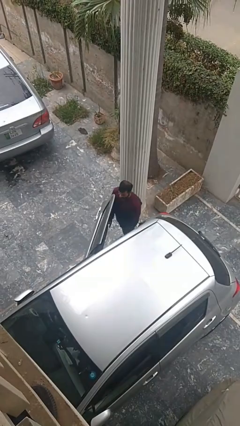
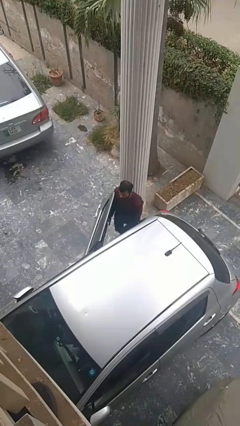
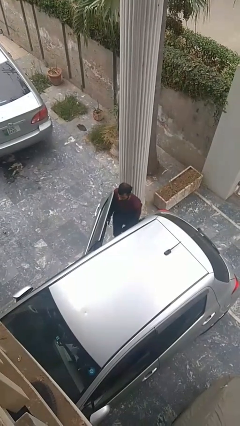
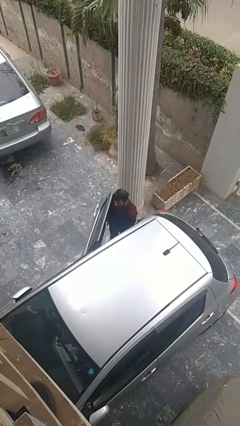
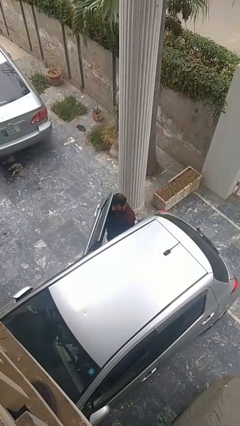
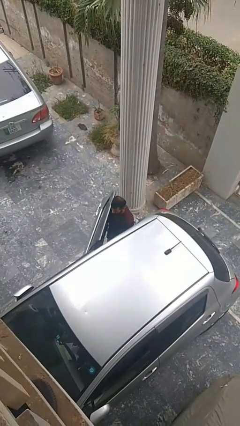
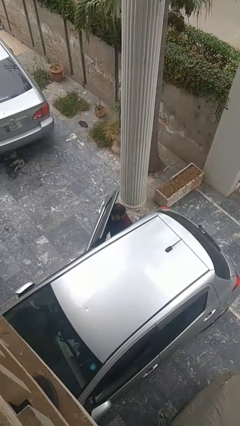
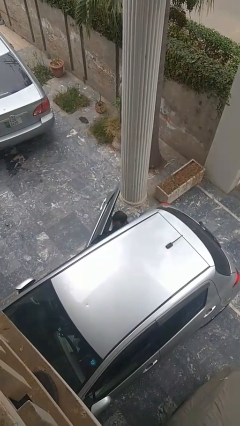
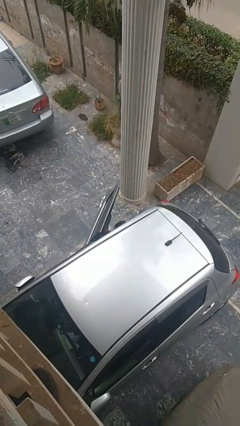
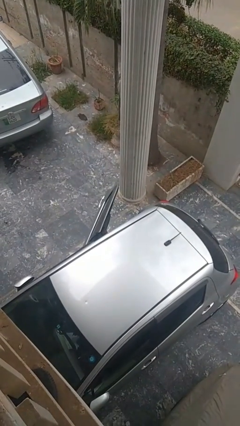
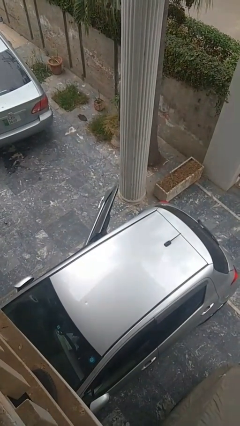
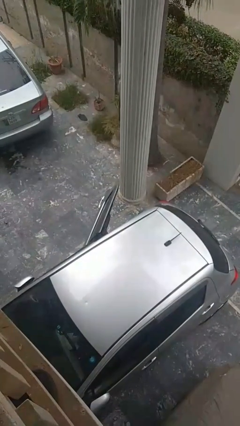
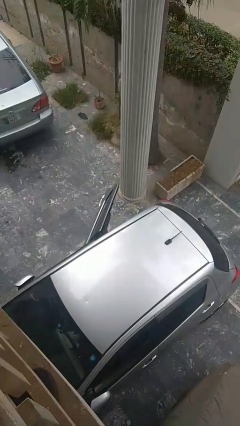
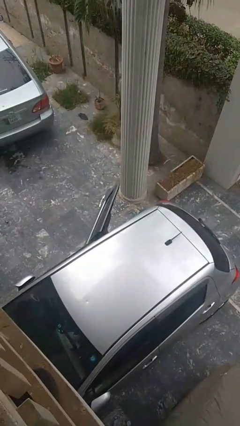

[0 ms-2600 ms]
person enters car

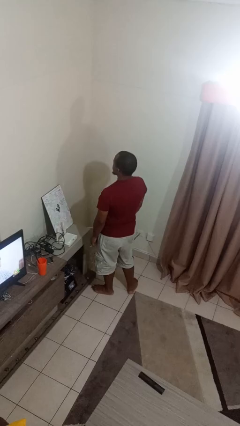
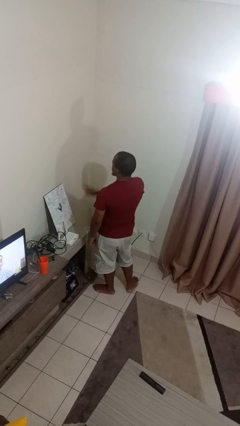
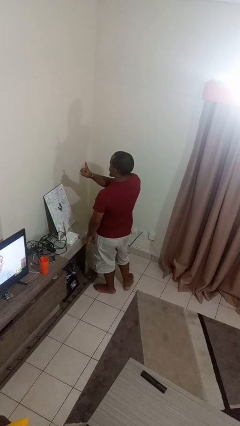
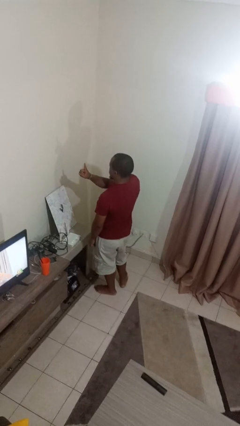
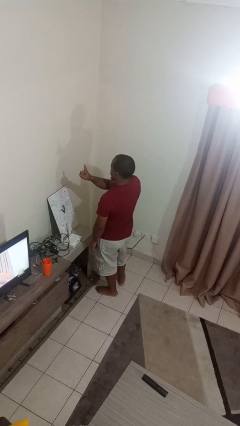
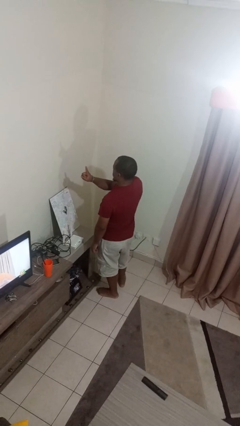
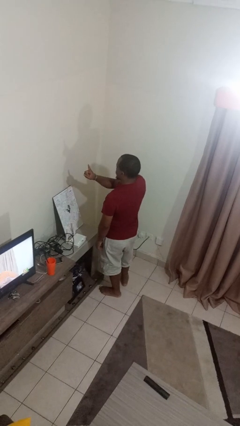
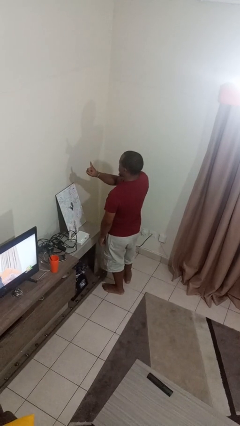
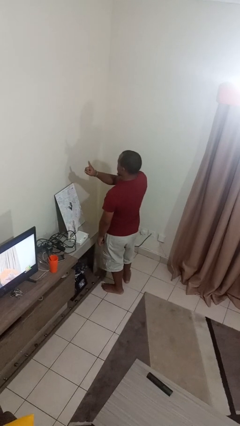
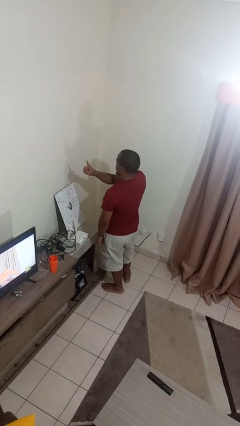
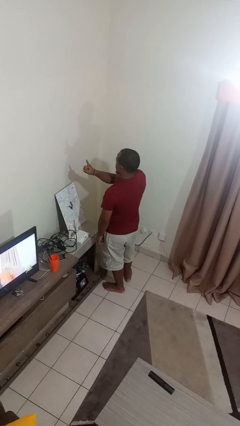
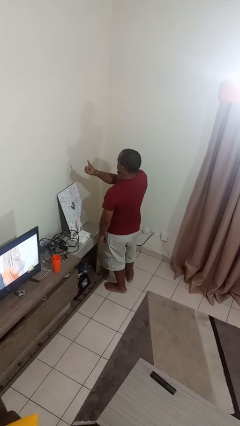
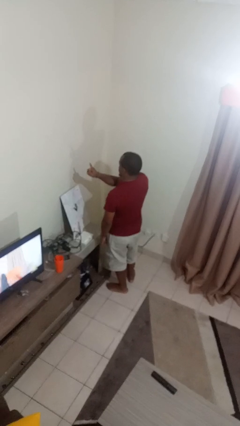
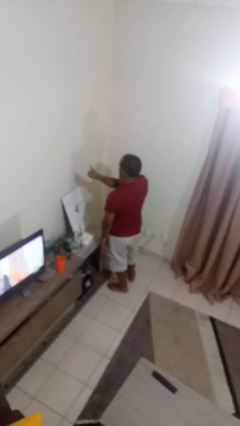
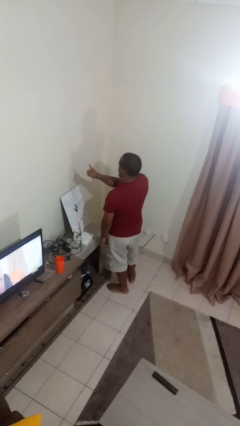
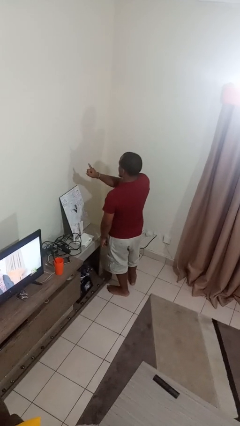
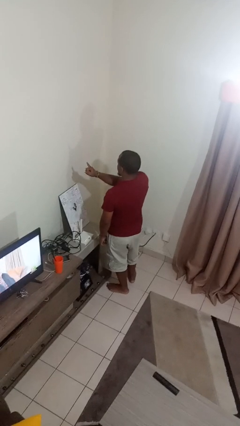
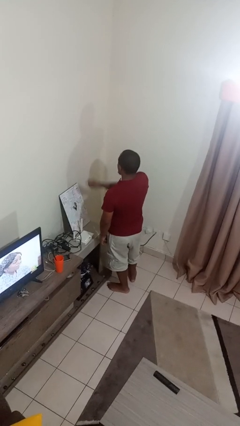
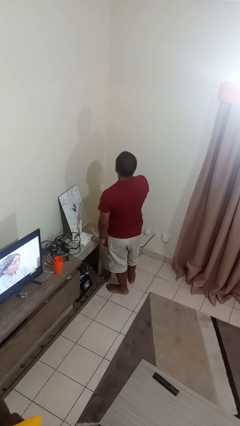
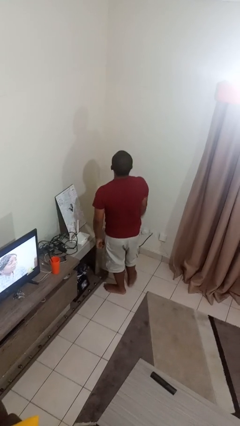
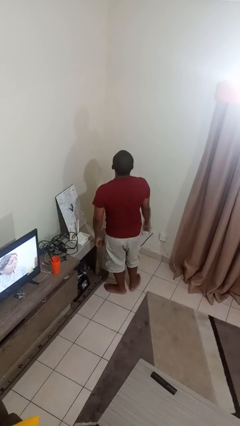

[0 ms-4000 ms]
person gestures number one

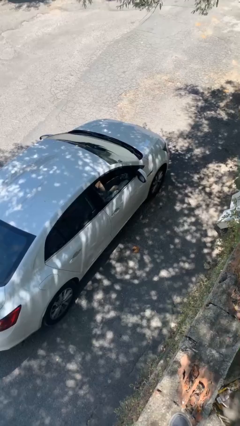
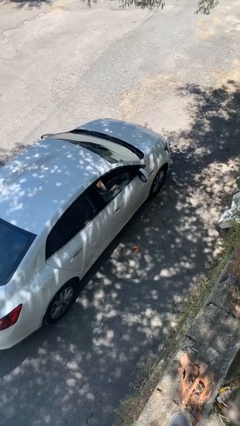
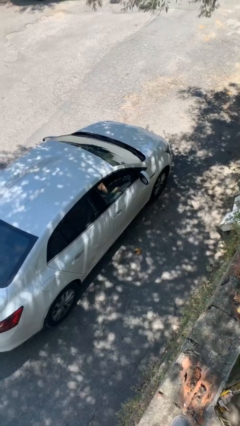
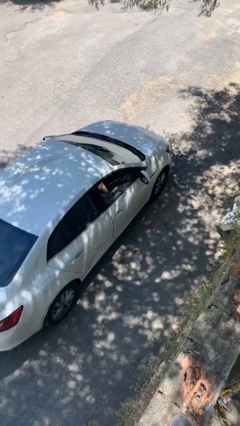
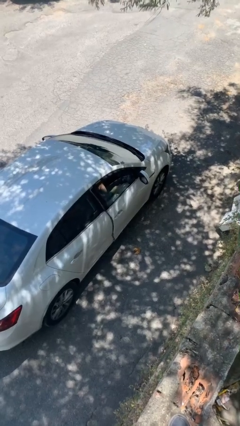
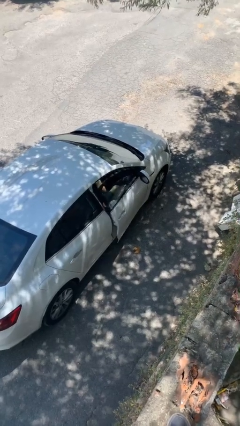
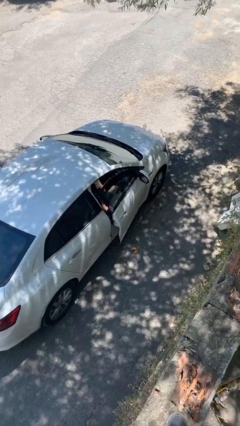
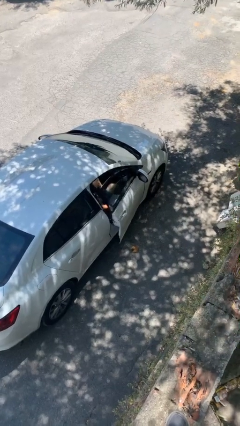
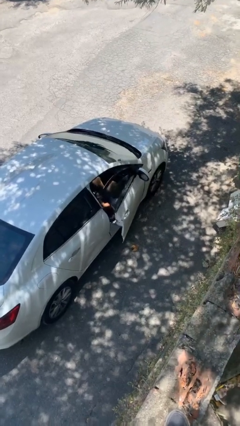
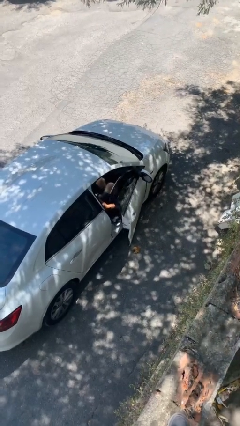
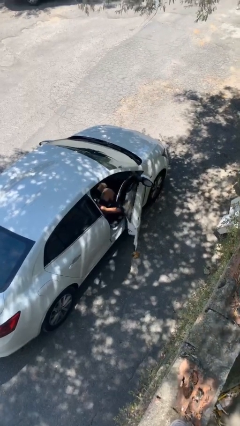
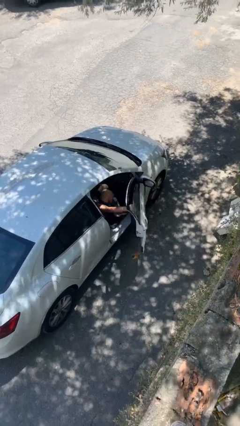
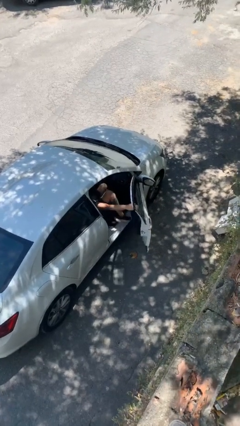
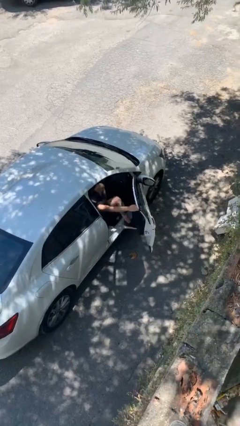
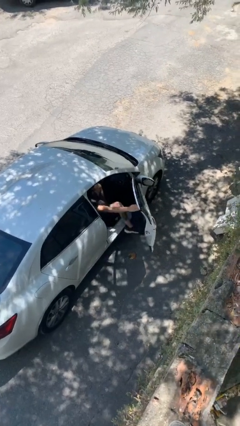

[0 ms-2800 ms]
person opens car door

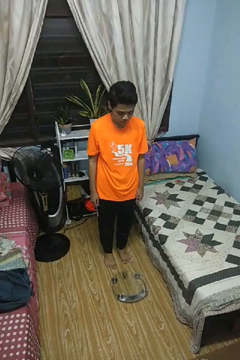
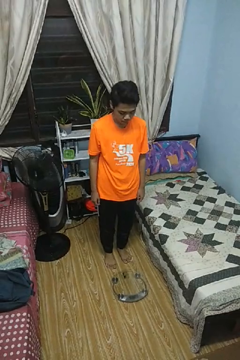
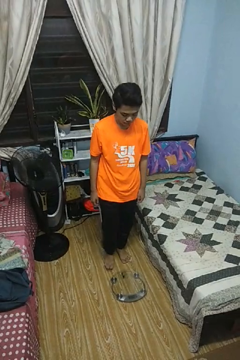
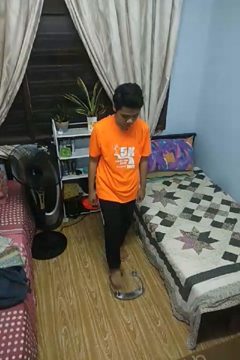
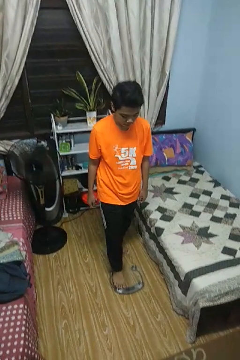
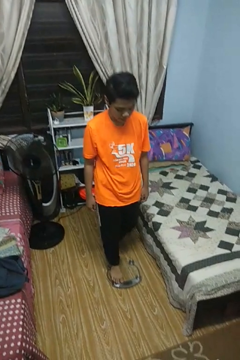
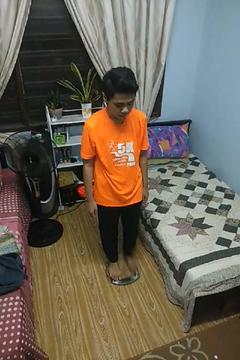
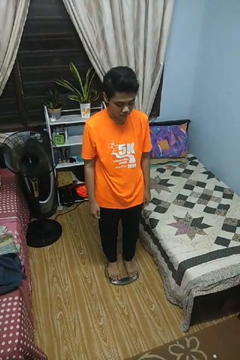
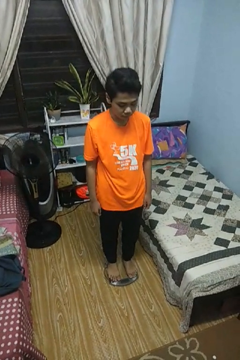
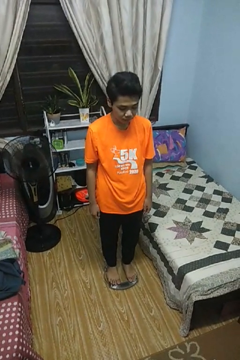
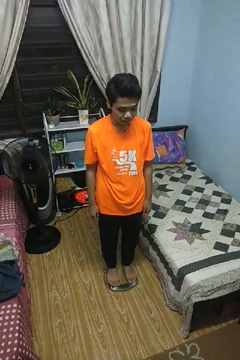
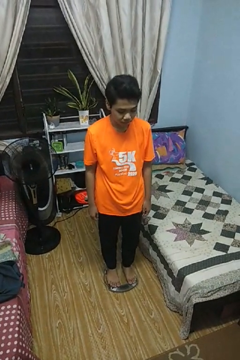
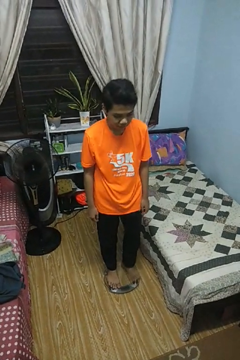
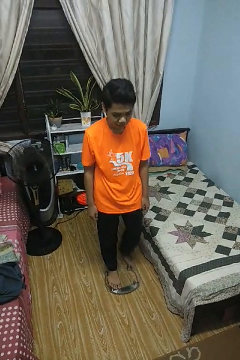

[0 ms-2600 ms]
person uses bodyweight scale

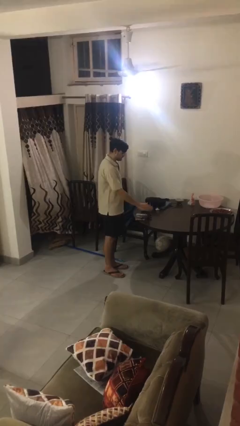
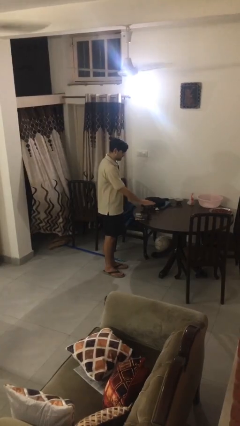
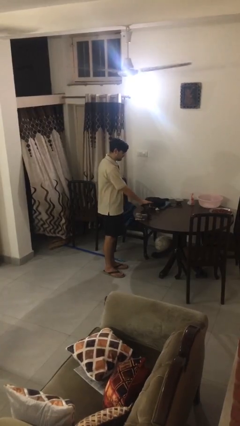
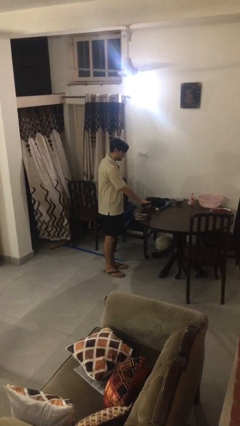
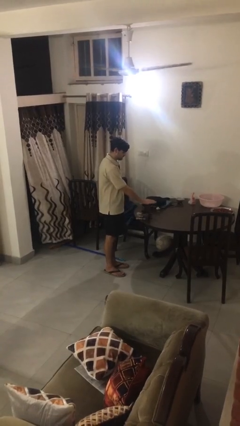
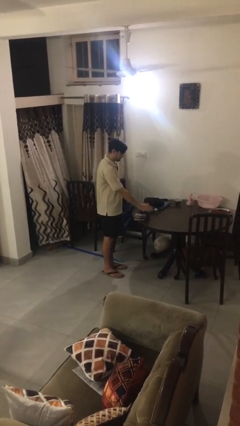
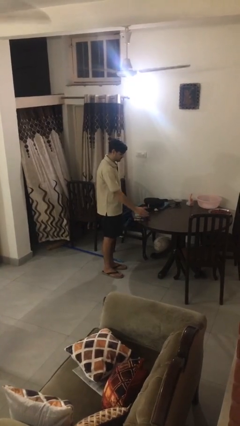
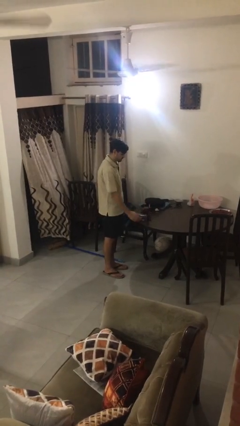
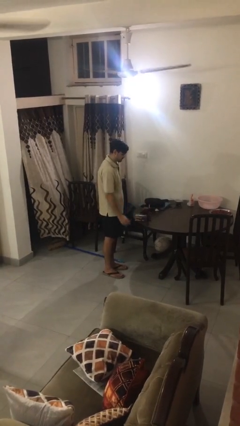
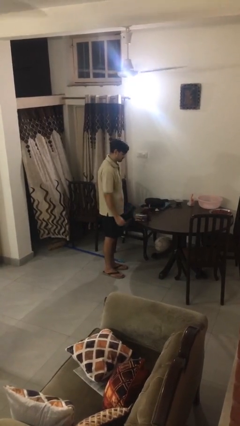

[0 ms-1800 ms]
person waves hand over object

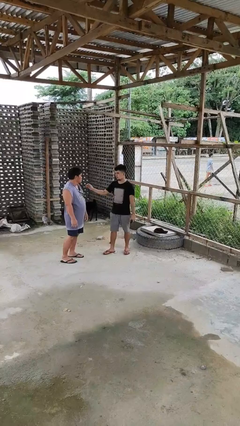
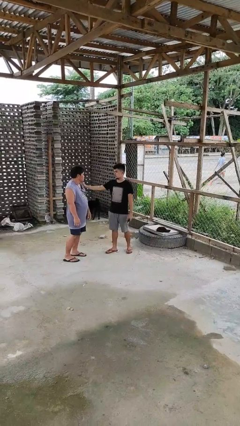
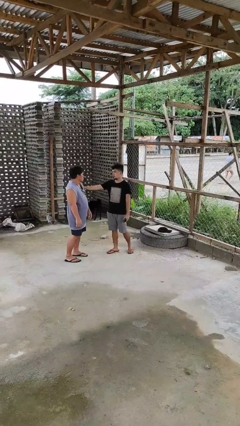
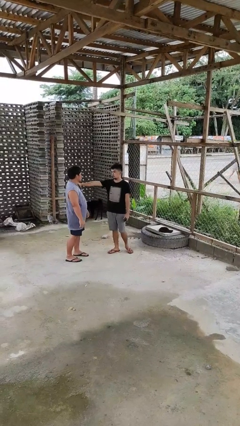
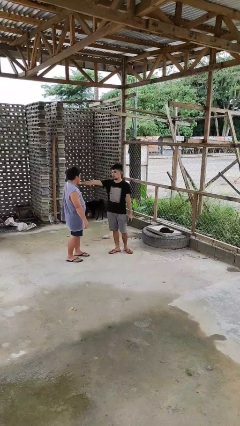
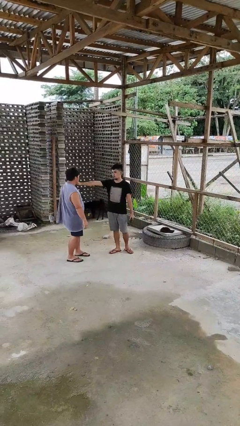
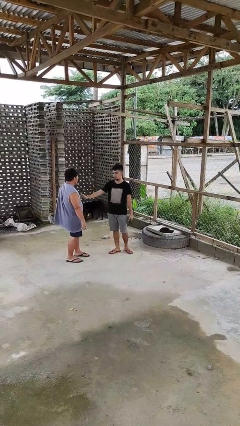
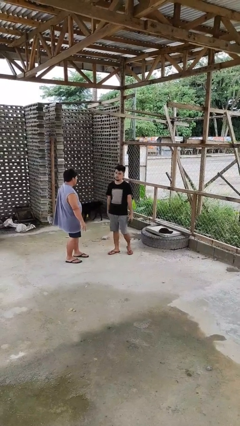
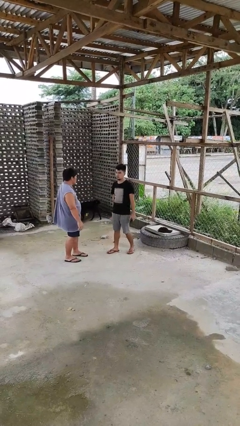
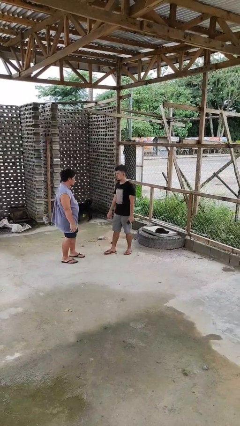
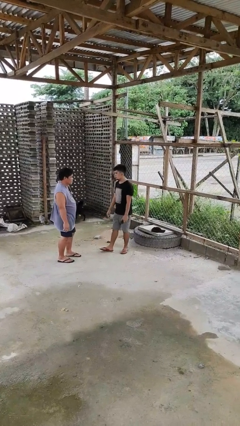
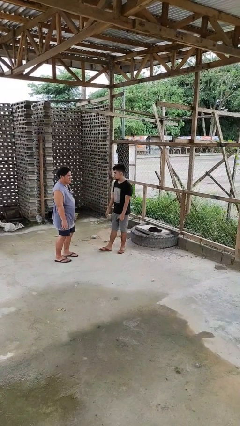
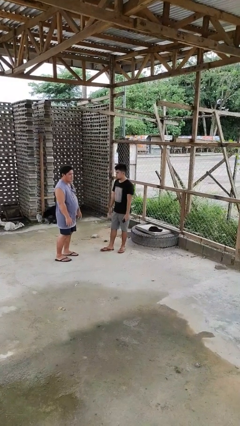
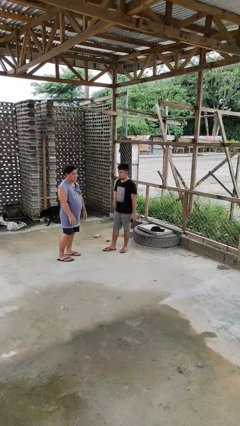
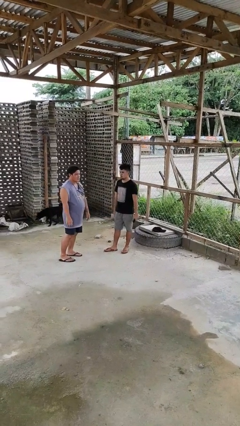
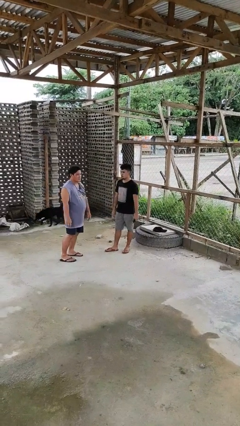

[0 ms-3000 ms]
person shoves person

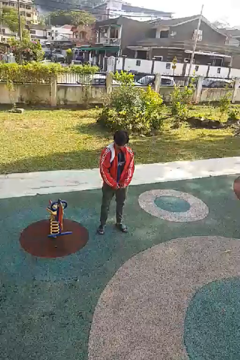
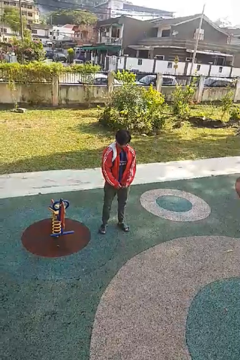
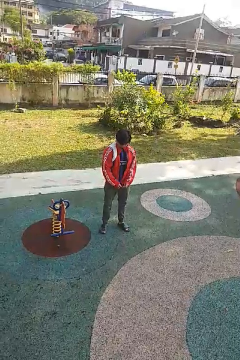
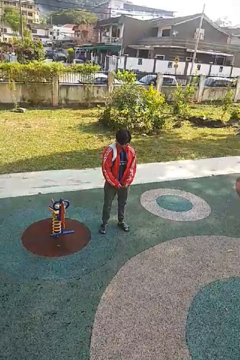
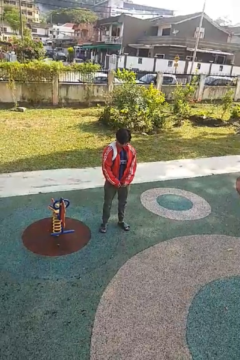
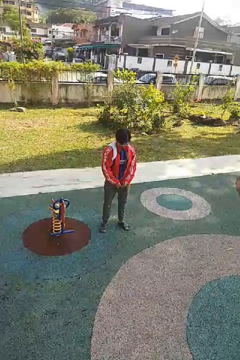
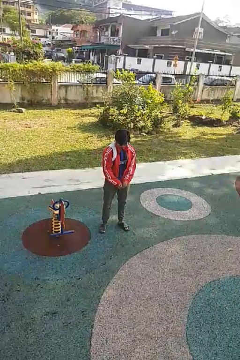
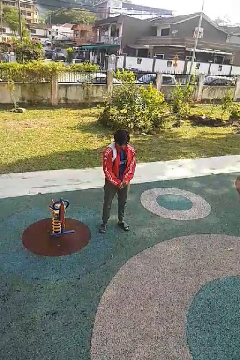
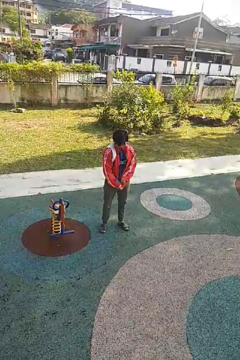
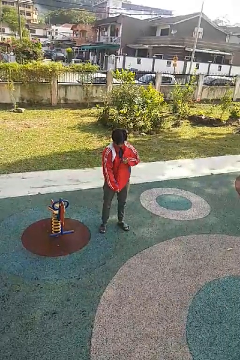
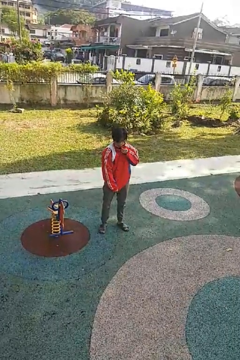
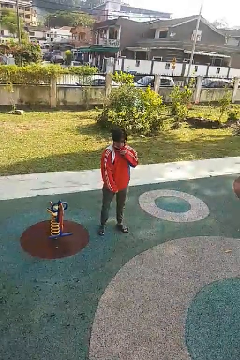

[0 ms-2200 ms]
person zips up jacket
